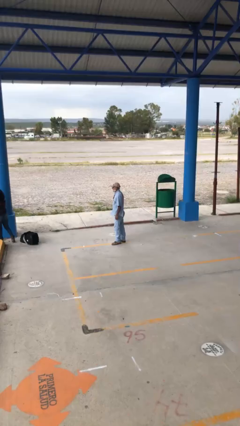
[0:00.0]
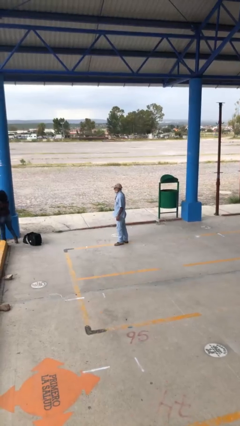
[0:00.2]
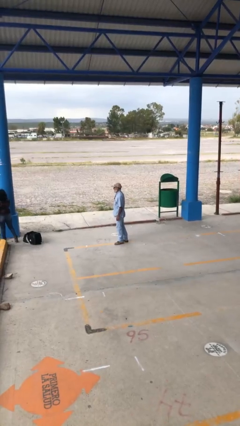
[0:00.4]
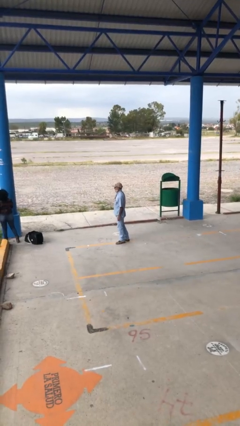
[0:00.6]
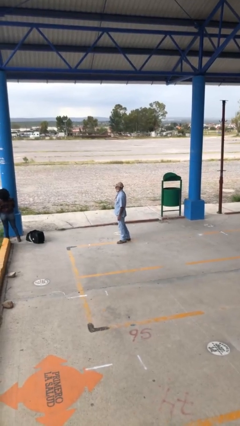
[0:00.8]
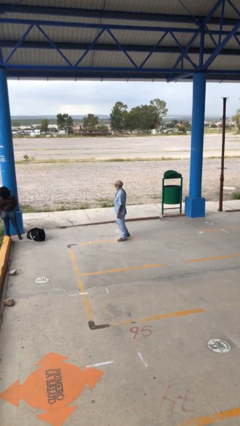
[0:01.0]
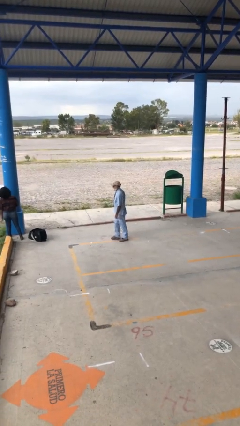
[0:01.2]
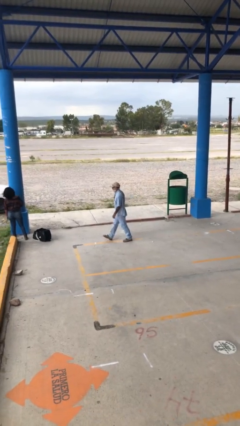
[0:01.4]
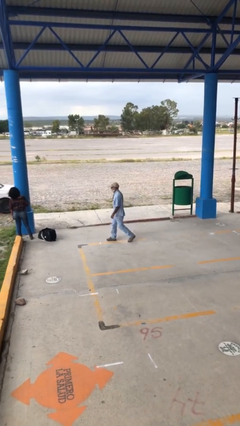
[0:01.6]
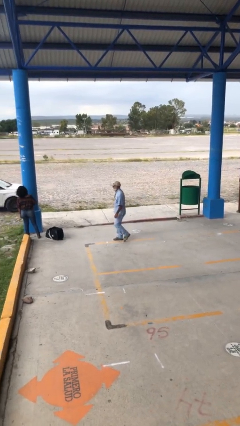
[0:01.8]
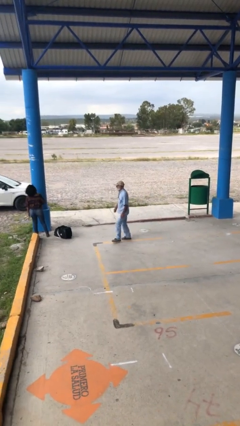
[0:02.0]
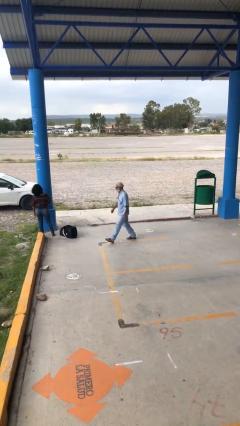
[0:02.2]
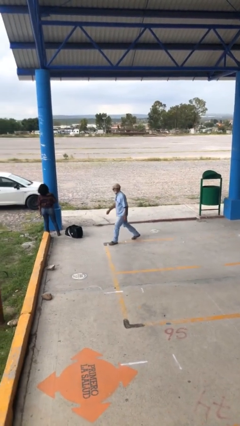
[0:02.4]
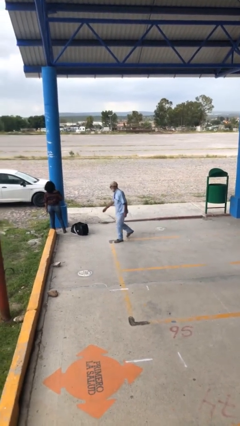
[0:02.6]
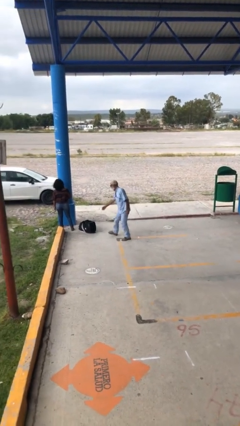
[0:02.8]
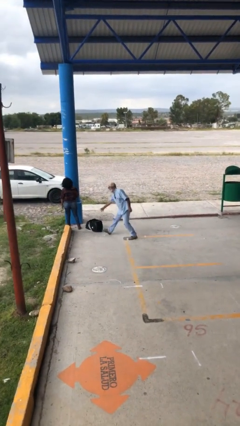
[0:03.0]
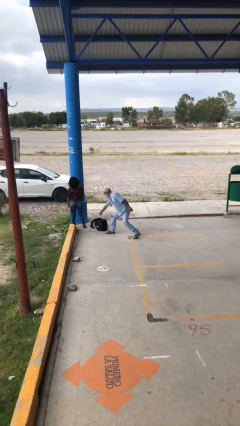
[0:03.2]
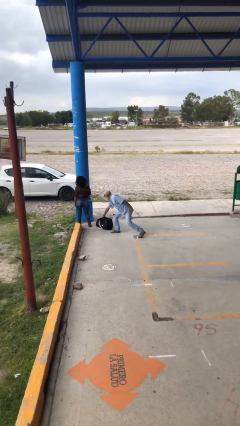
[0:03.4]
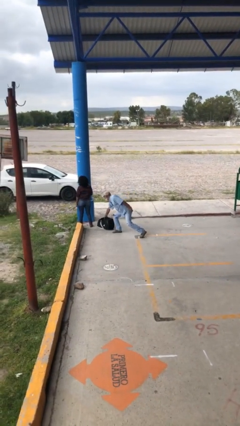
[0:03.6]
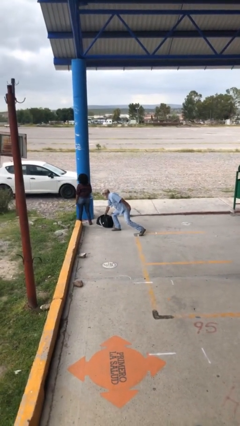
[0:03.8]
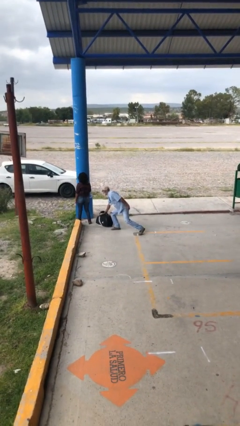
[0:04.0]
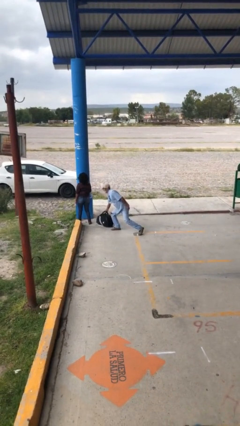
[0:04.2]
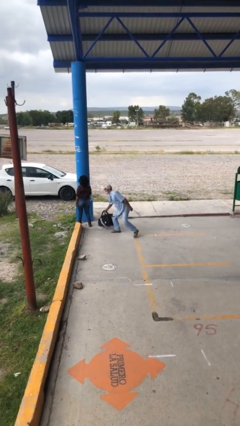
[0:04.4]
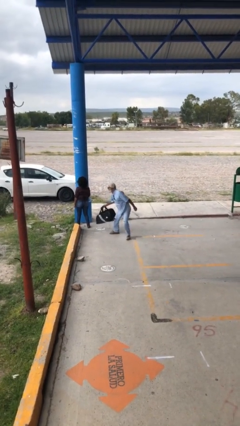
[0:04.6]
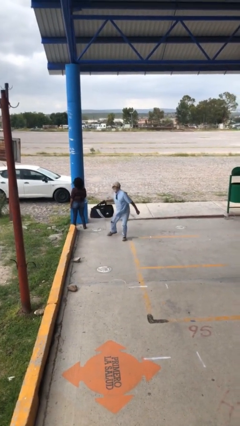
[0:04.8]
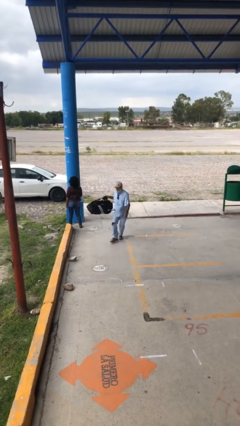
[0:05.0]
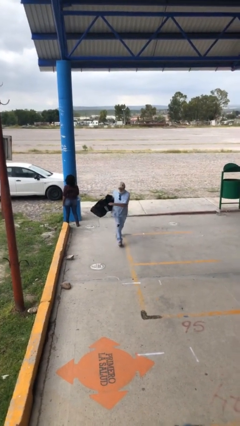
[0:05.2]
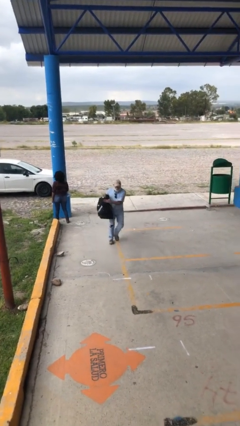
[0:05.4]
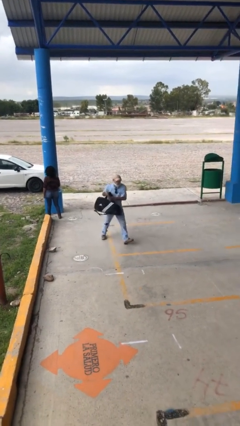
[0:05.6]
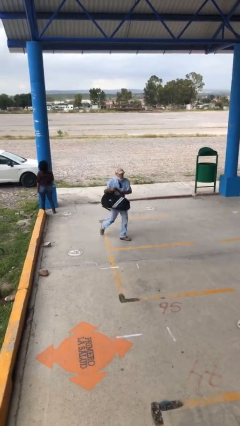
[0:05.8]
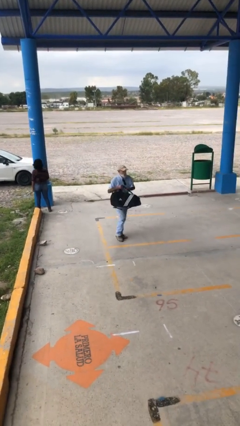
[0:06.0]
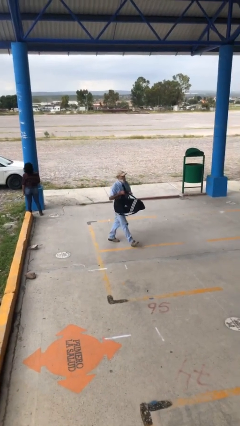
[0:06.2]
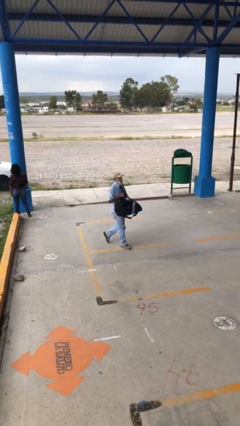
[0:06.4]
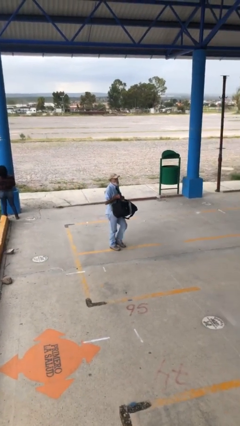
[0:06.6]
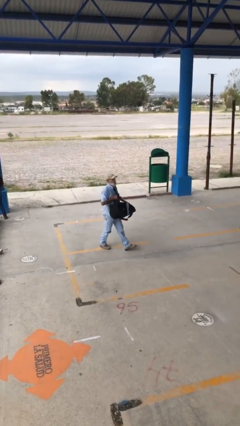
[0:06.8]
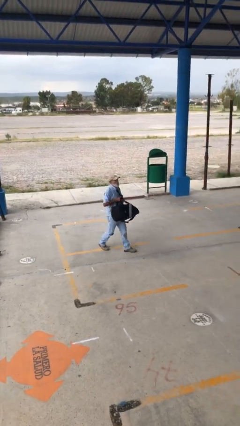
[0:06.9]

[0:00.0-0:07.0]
person steals object from person

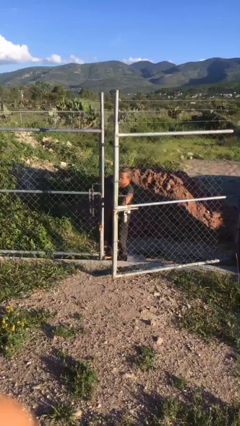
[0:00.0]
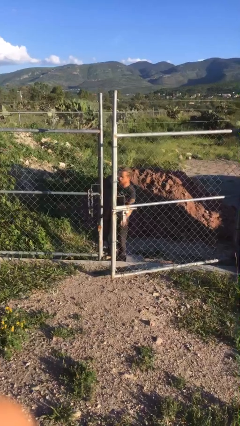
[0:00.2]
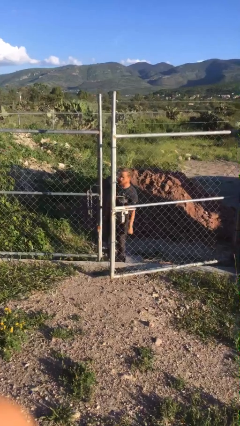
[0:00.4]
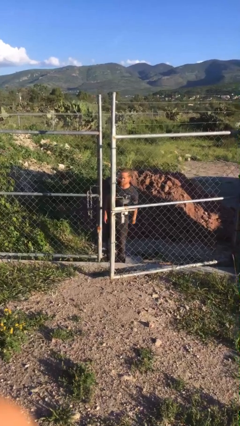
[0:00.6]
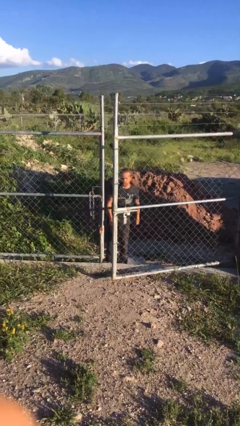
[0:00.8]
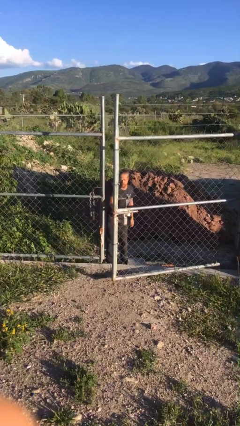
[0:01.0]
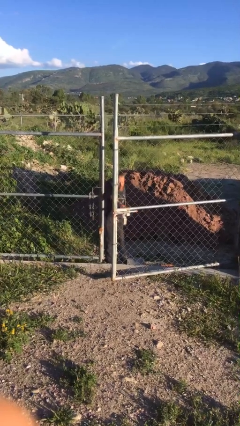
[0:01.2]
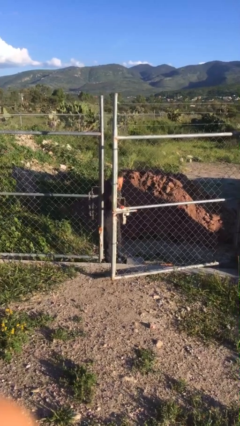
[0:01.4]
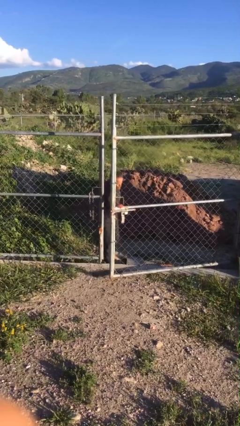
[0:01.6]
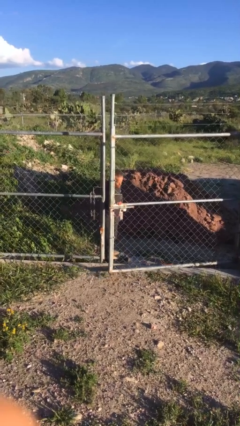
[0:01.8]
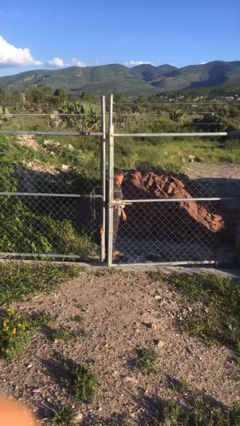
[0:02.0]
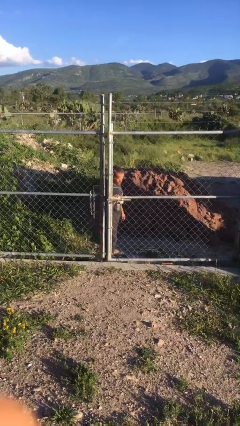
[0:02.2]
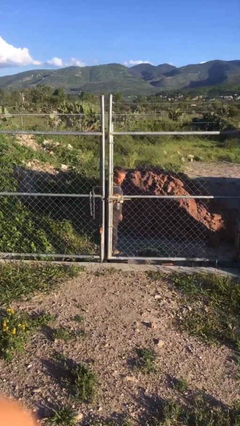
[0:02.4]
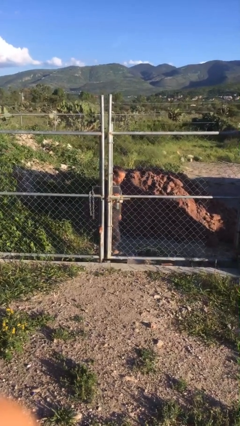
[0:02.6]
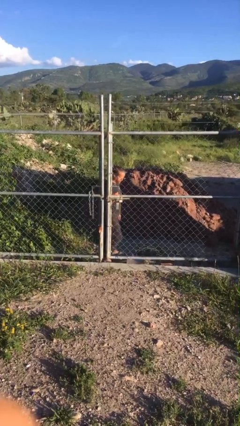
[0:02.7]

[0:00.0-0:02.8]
person closes gate

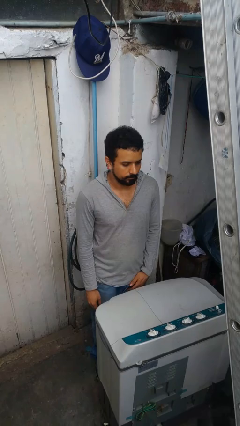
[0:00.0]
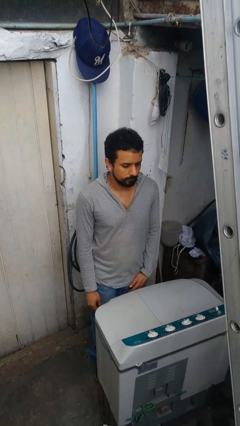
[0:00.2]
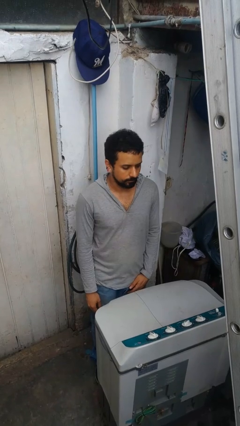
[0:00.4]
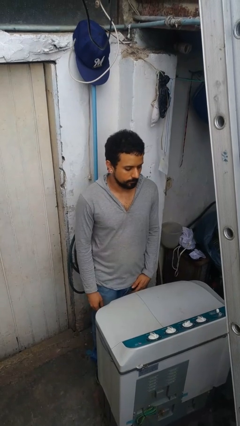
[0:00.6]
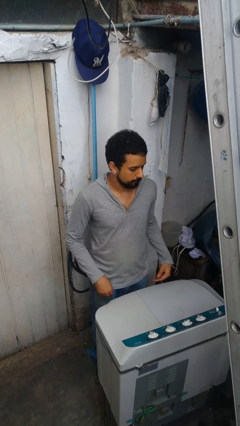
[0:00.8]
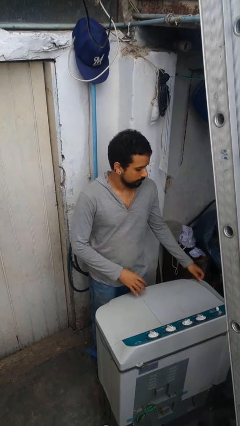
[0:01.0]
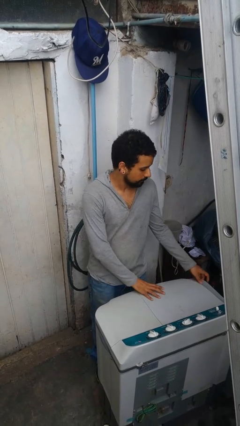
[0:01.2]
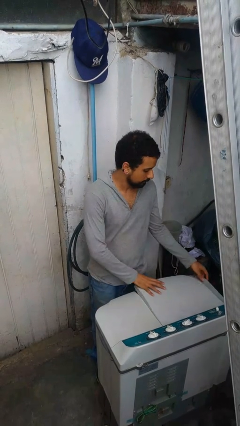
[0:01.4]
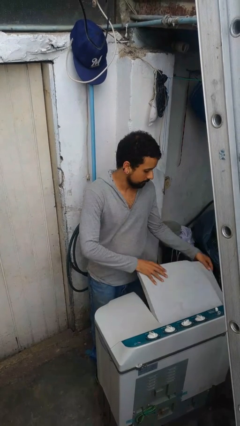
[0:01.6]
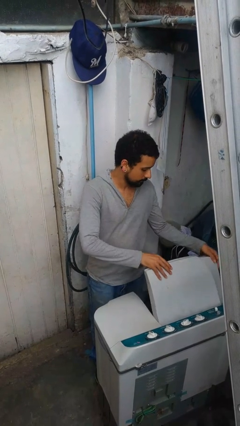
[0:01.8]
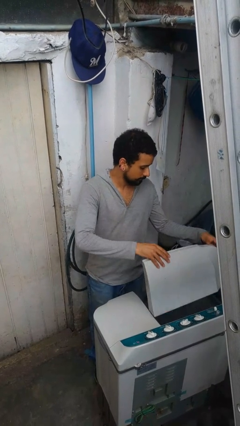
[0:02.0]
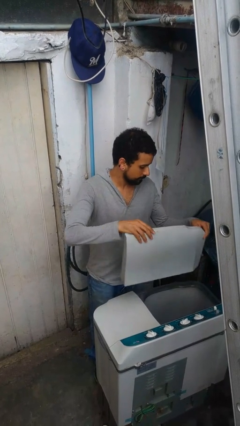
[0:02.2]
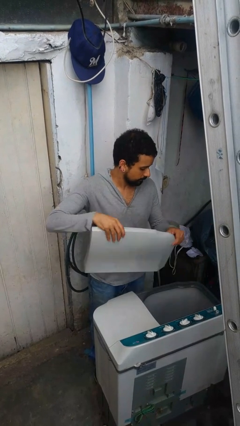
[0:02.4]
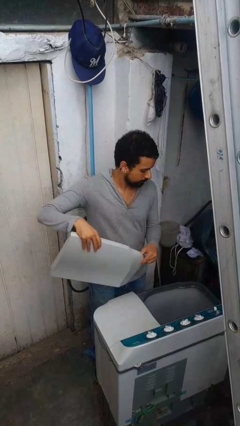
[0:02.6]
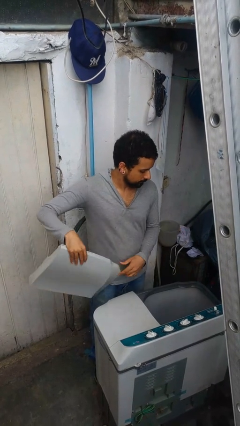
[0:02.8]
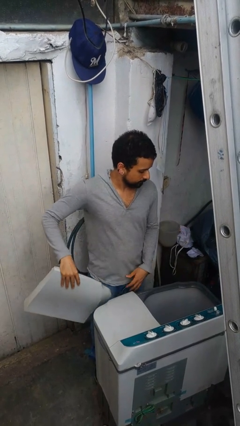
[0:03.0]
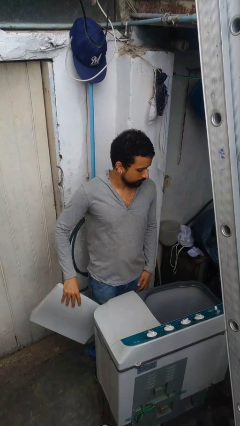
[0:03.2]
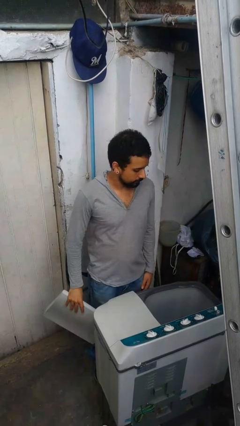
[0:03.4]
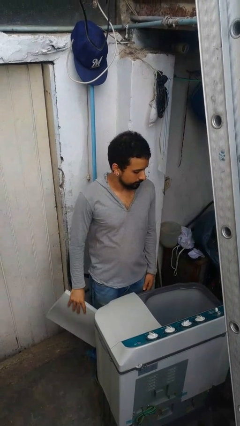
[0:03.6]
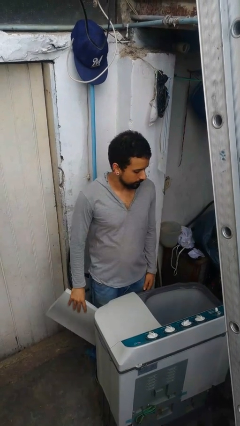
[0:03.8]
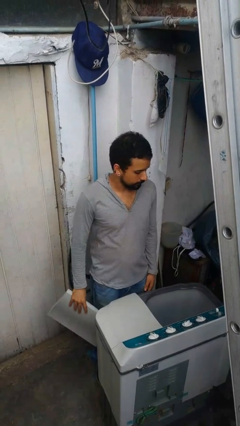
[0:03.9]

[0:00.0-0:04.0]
person opens clothes washer

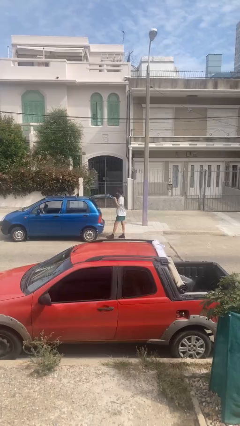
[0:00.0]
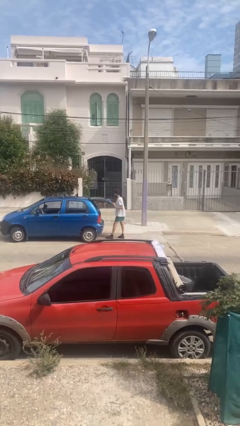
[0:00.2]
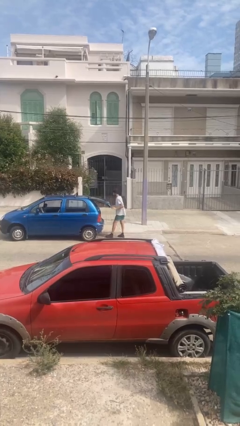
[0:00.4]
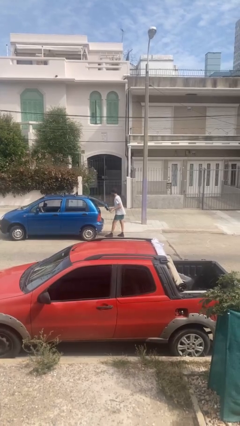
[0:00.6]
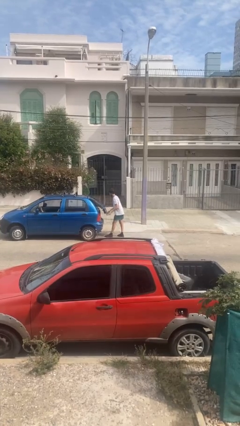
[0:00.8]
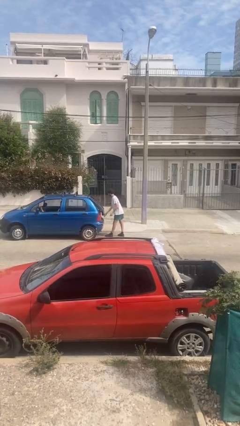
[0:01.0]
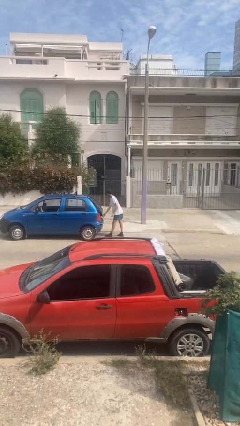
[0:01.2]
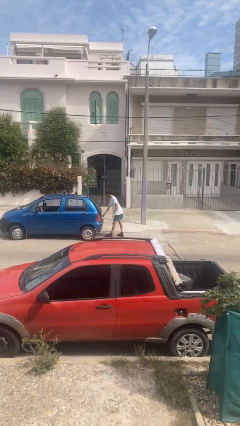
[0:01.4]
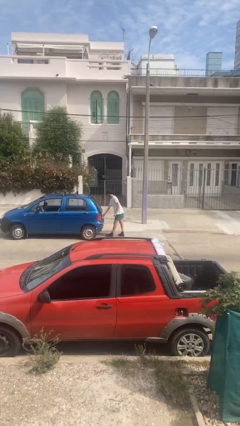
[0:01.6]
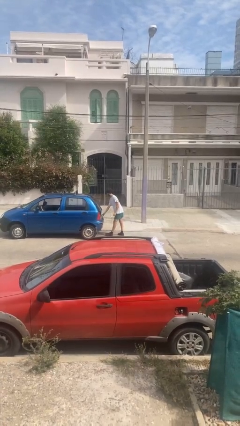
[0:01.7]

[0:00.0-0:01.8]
person closes car trunk

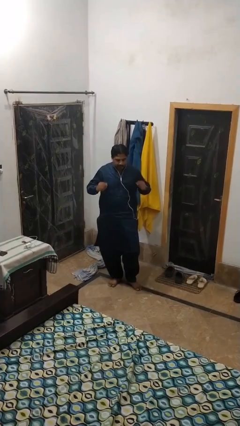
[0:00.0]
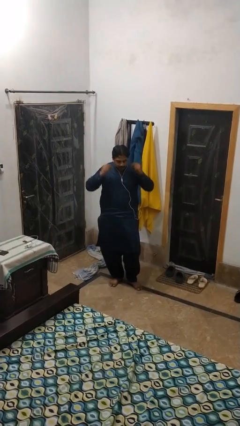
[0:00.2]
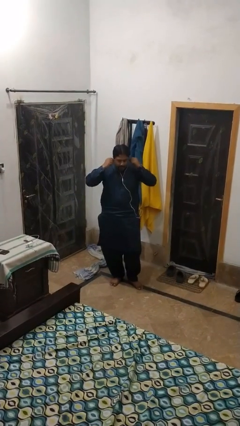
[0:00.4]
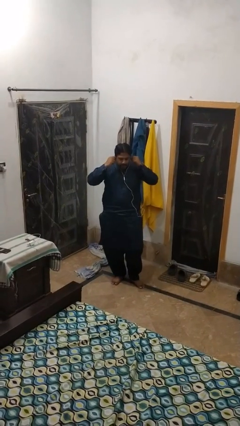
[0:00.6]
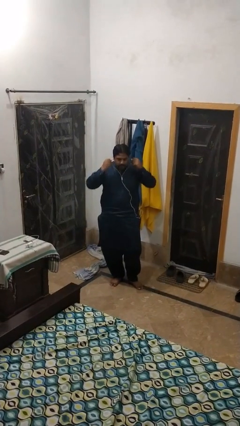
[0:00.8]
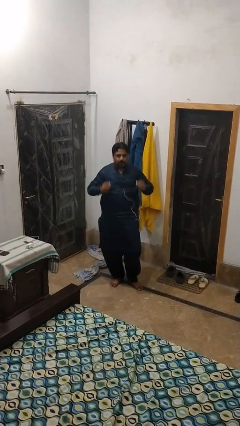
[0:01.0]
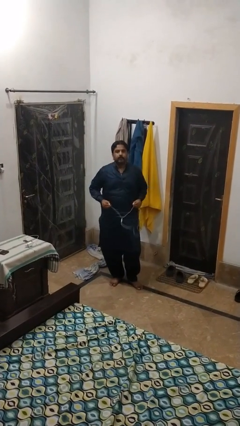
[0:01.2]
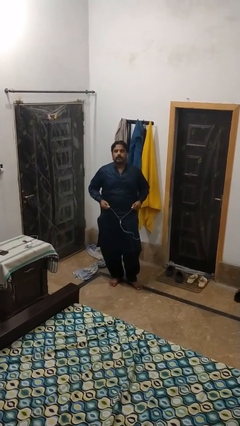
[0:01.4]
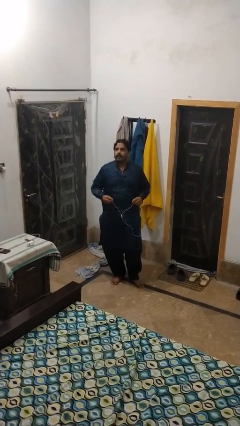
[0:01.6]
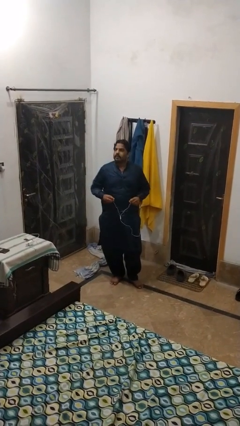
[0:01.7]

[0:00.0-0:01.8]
person takes off headphones
